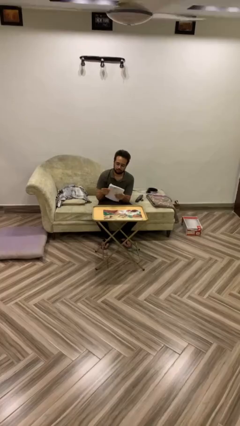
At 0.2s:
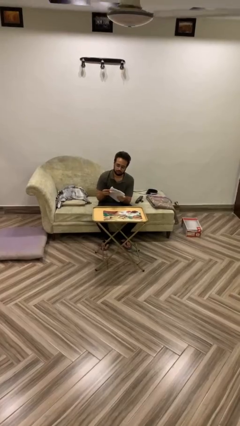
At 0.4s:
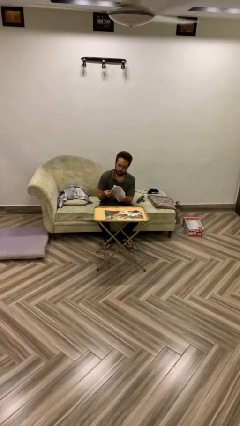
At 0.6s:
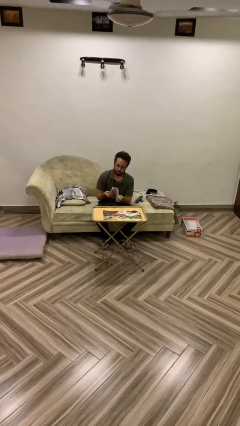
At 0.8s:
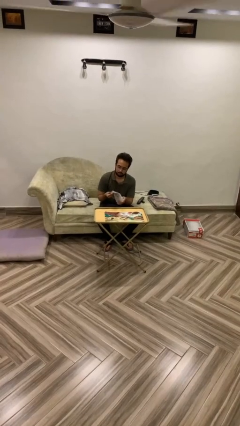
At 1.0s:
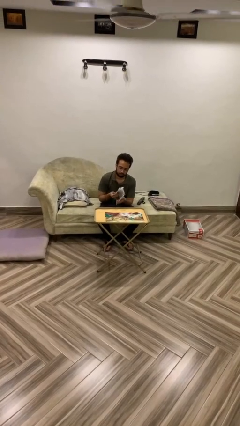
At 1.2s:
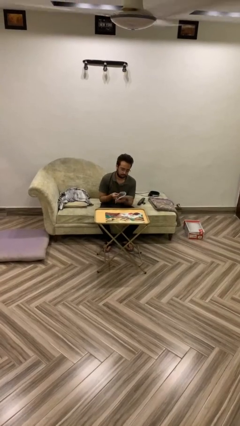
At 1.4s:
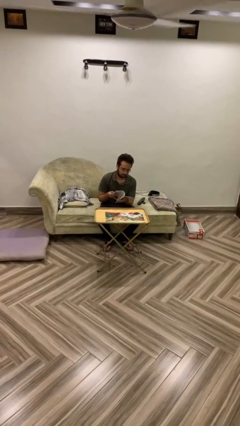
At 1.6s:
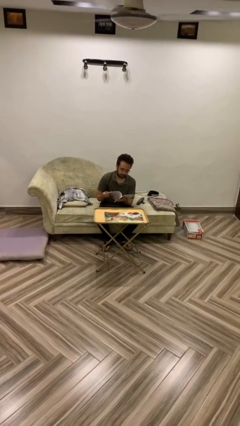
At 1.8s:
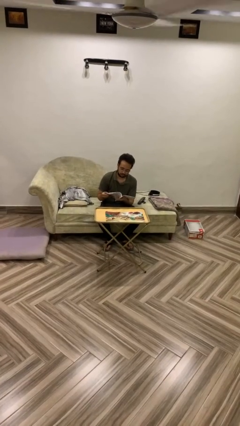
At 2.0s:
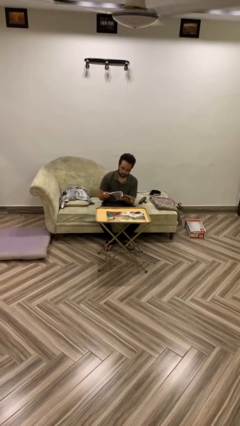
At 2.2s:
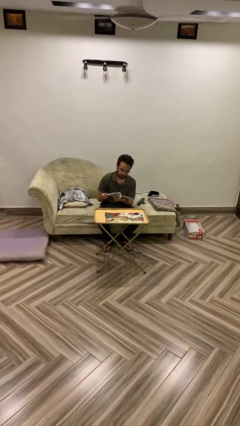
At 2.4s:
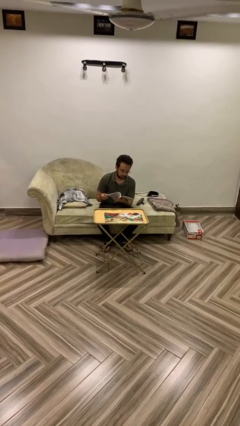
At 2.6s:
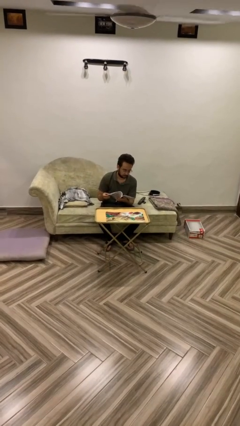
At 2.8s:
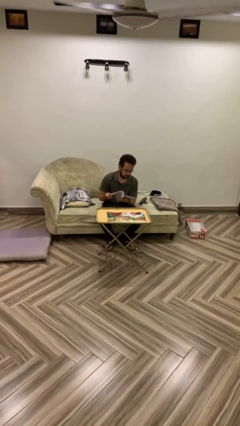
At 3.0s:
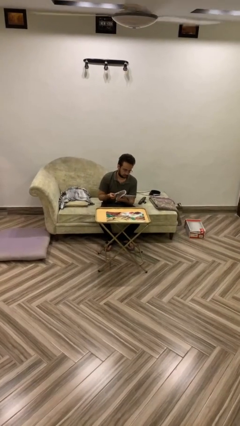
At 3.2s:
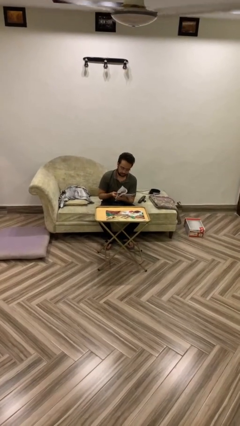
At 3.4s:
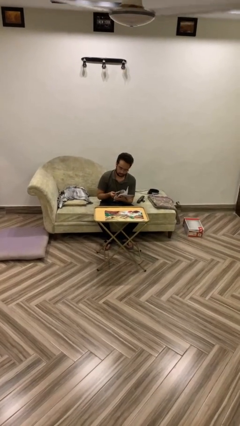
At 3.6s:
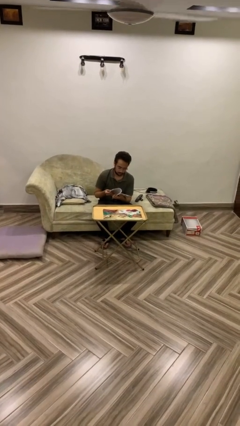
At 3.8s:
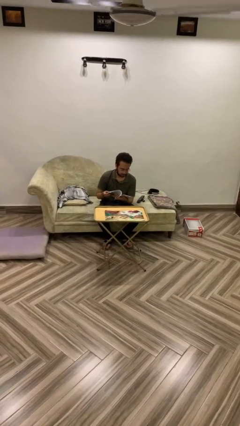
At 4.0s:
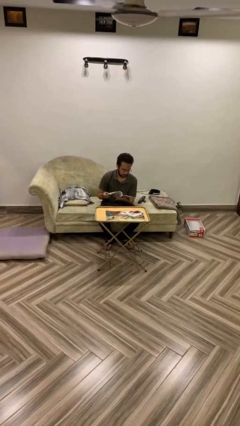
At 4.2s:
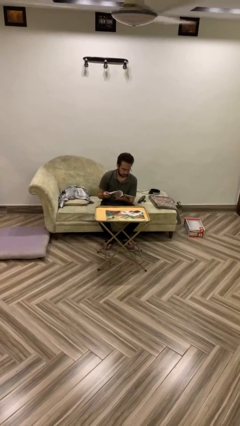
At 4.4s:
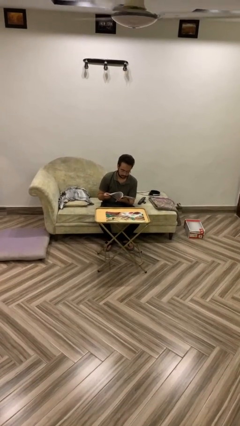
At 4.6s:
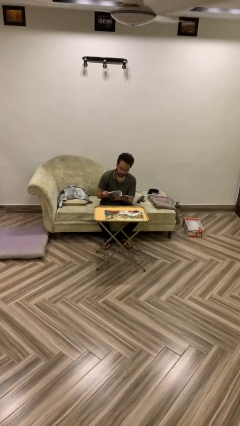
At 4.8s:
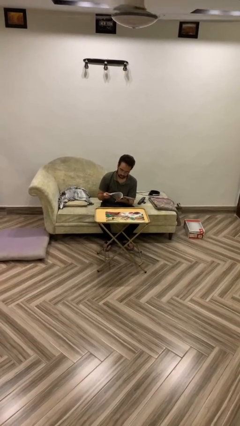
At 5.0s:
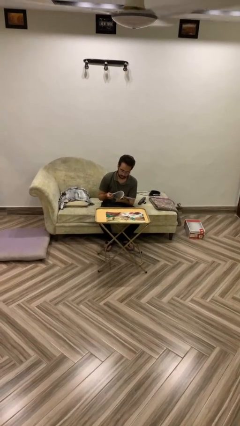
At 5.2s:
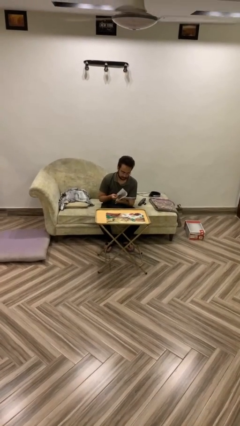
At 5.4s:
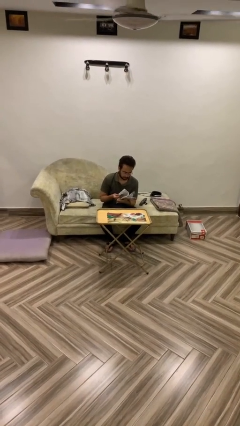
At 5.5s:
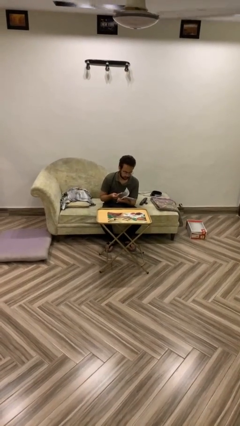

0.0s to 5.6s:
person reads document

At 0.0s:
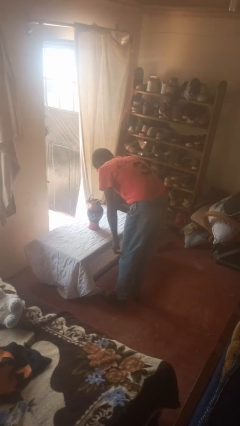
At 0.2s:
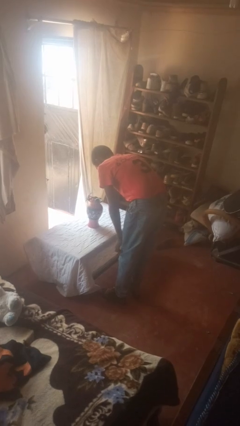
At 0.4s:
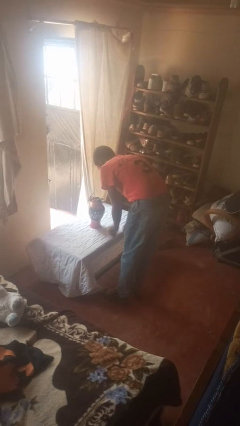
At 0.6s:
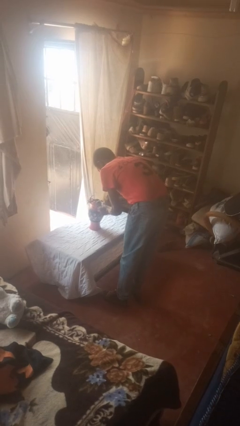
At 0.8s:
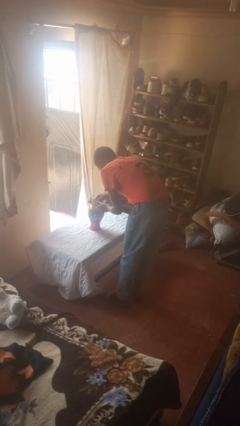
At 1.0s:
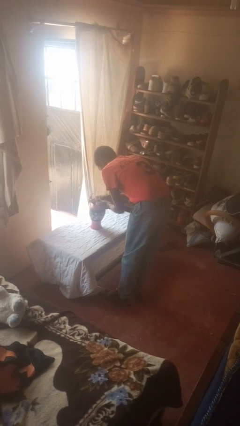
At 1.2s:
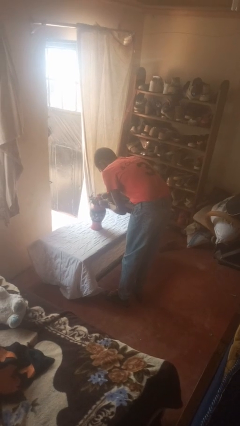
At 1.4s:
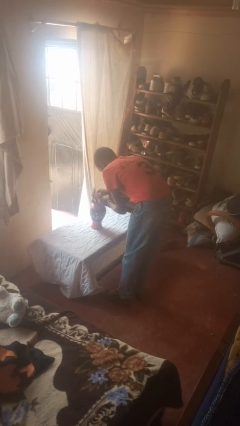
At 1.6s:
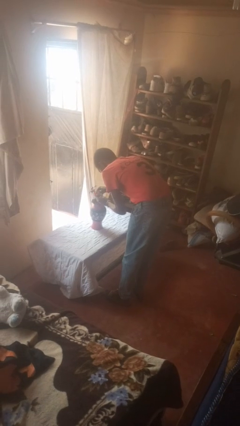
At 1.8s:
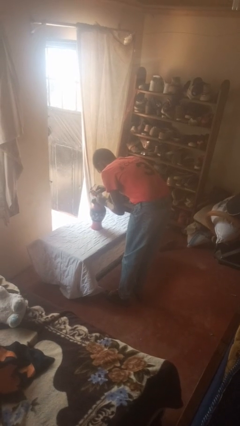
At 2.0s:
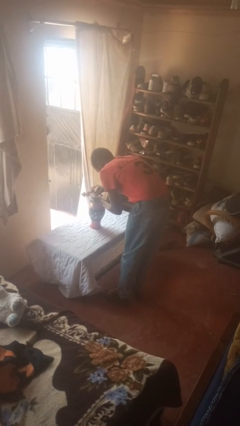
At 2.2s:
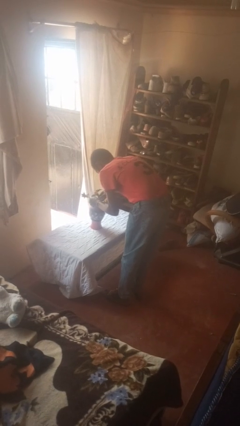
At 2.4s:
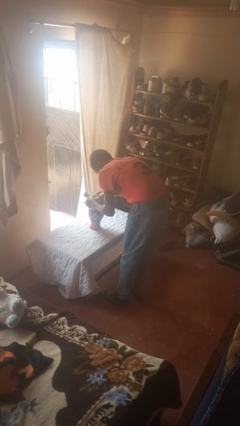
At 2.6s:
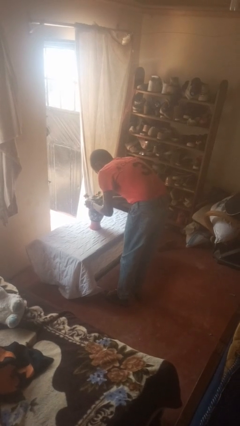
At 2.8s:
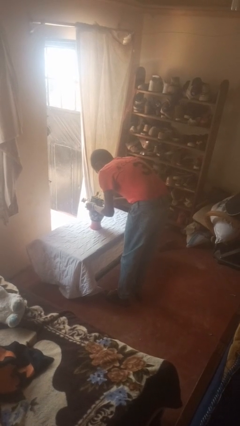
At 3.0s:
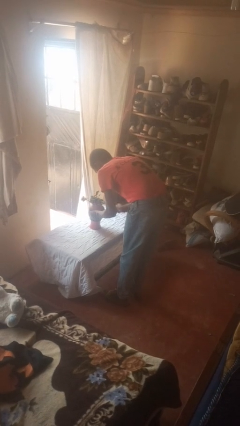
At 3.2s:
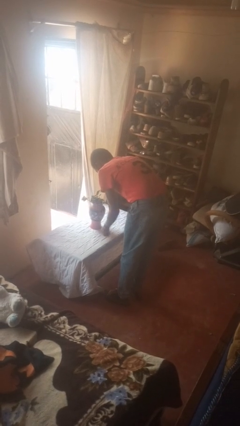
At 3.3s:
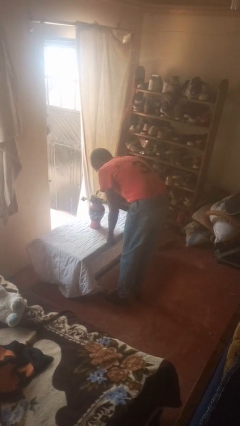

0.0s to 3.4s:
person arranges flowers in vase

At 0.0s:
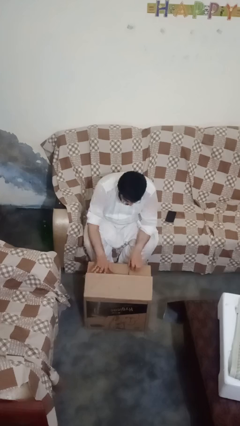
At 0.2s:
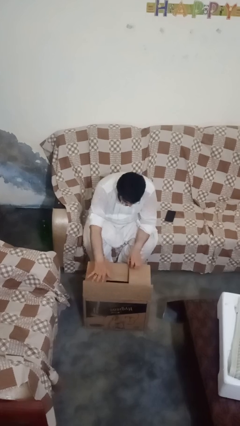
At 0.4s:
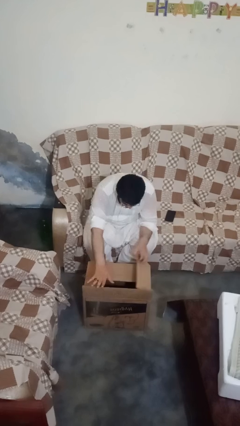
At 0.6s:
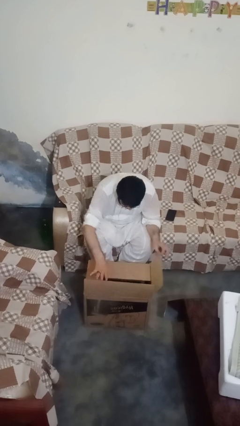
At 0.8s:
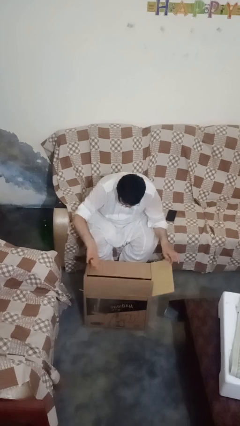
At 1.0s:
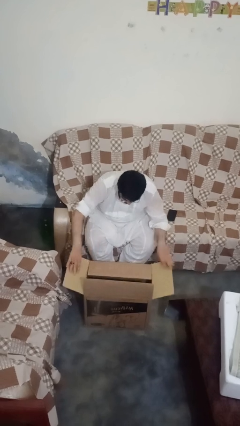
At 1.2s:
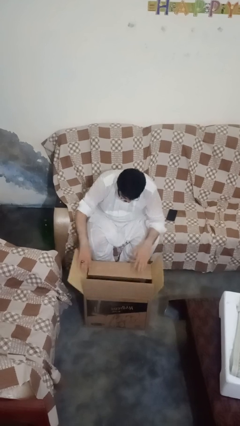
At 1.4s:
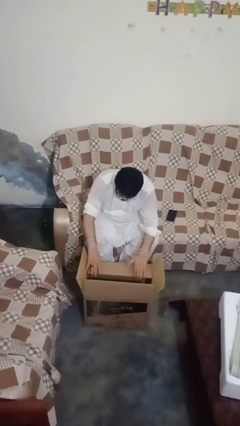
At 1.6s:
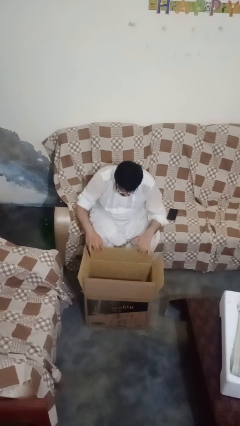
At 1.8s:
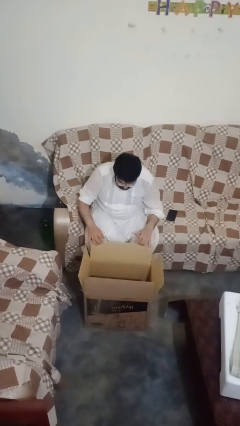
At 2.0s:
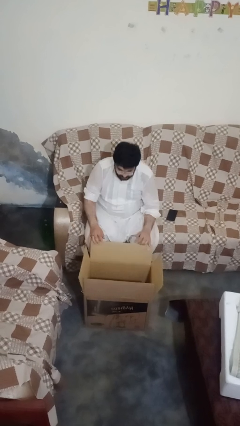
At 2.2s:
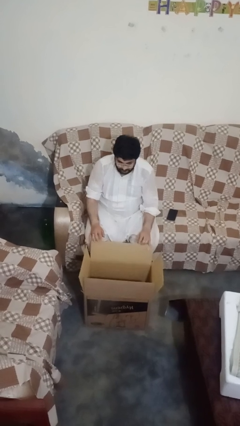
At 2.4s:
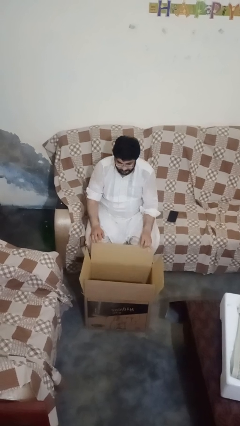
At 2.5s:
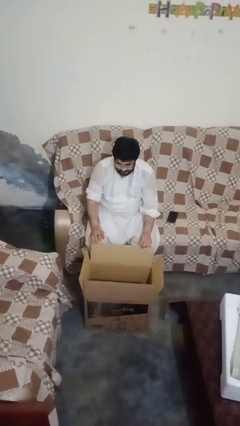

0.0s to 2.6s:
person opens box

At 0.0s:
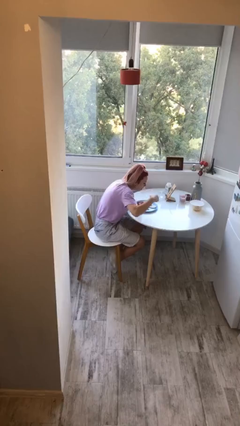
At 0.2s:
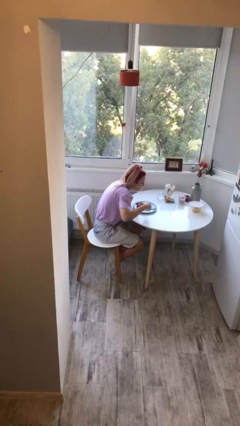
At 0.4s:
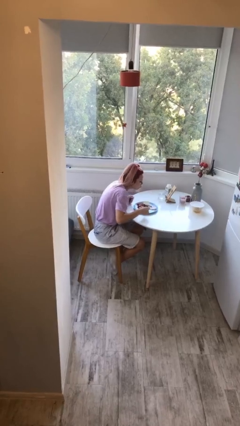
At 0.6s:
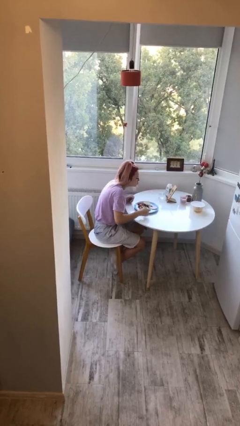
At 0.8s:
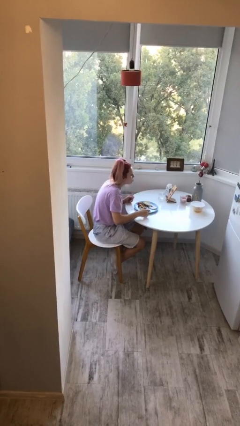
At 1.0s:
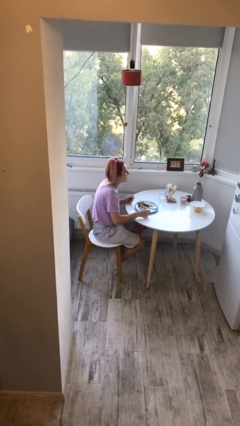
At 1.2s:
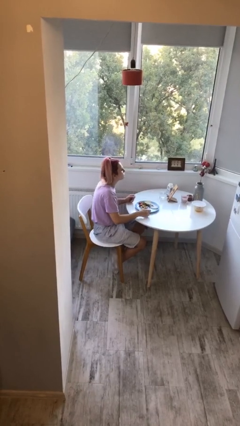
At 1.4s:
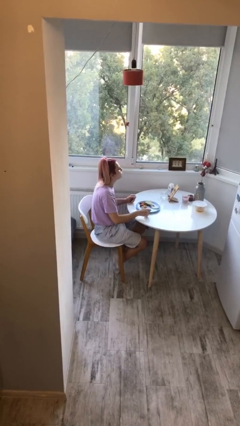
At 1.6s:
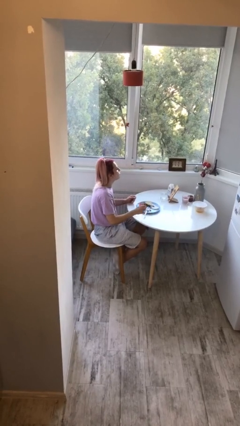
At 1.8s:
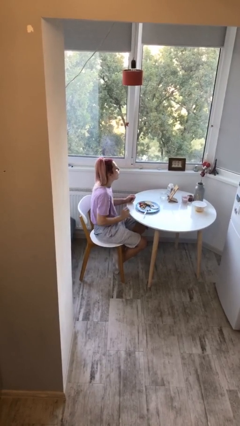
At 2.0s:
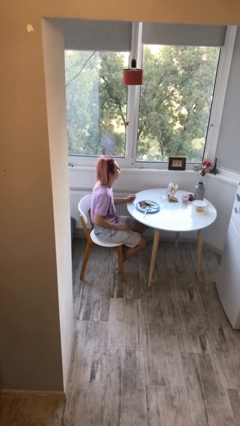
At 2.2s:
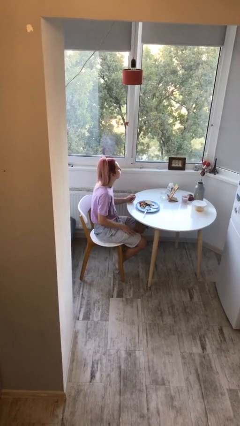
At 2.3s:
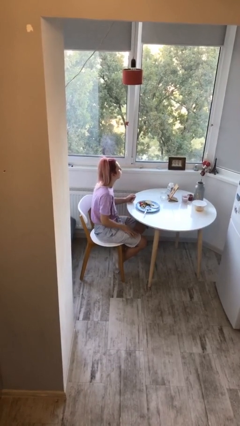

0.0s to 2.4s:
person eats with utensil

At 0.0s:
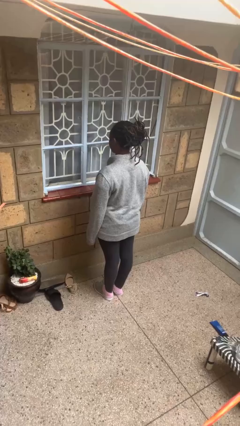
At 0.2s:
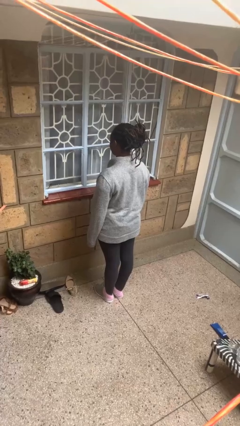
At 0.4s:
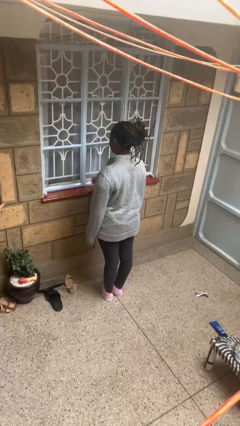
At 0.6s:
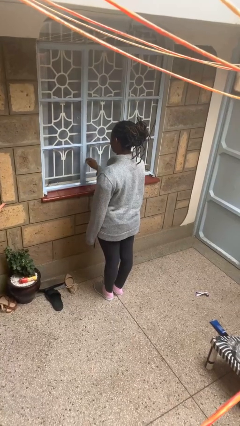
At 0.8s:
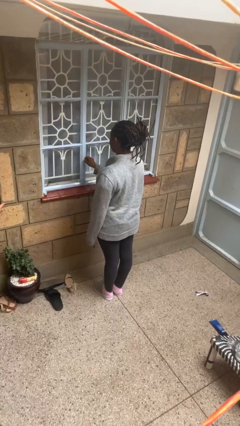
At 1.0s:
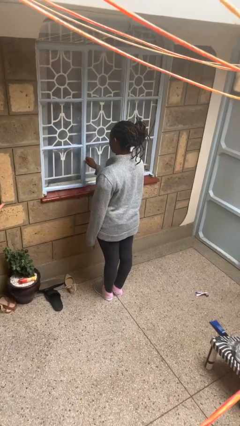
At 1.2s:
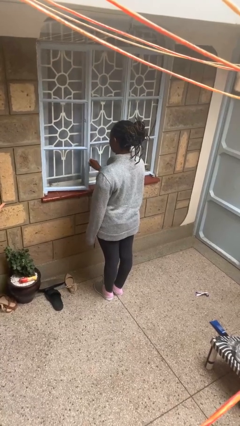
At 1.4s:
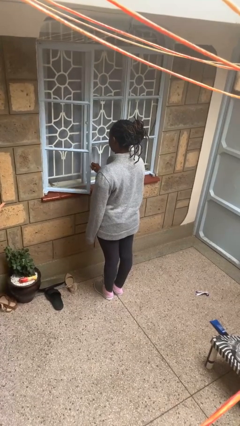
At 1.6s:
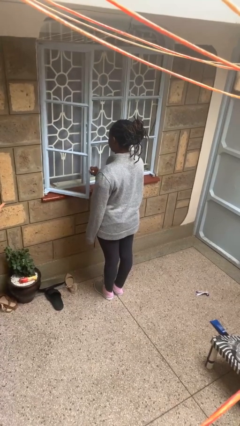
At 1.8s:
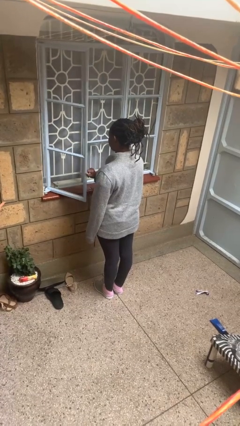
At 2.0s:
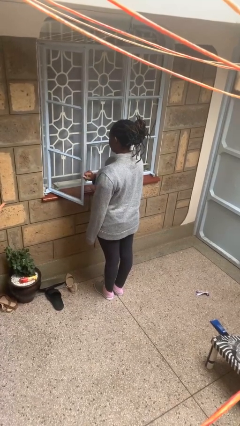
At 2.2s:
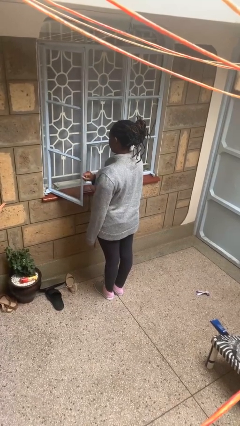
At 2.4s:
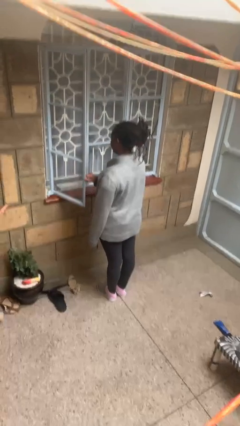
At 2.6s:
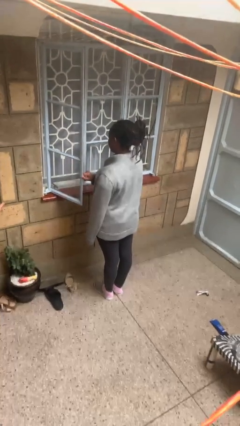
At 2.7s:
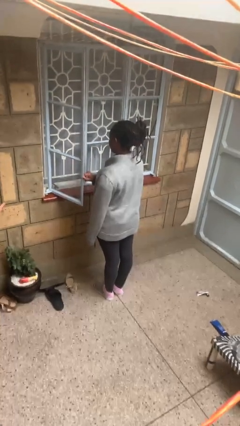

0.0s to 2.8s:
person opens home window

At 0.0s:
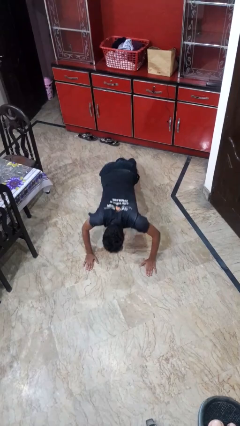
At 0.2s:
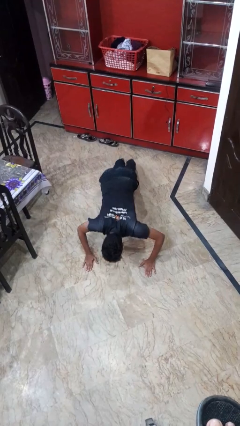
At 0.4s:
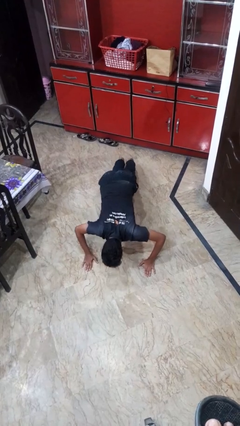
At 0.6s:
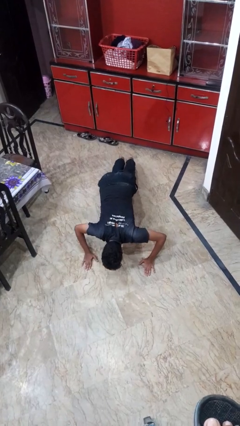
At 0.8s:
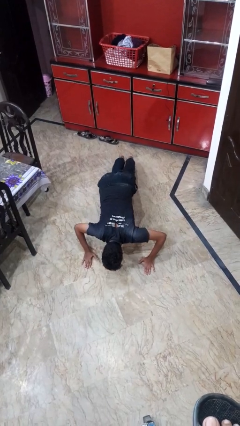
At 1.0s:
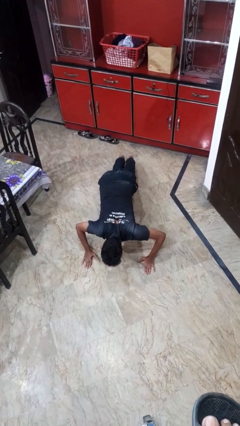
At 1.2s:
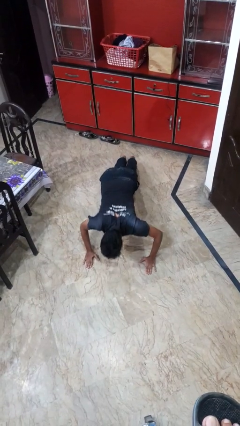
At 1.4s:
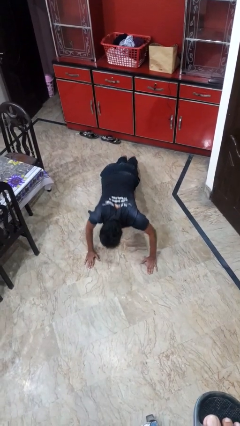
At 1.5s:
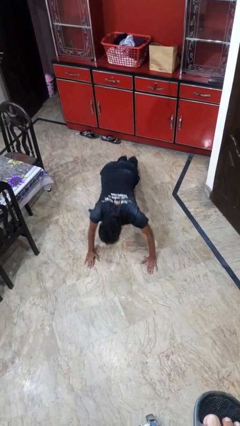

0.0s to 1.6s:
person exercises with pushup
